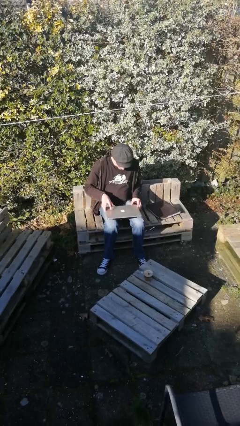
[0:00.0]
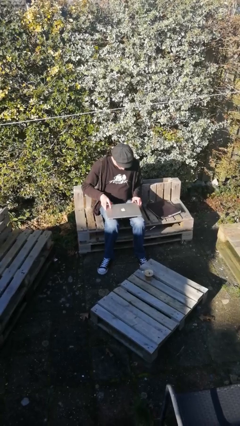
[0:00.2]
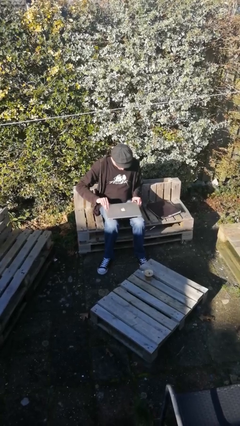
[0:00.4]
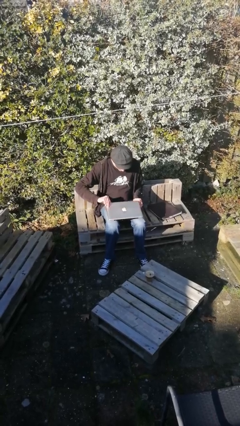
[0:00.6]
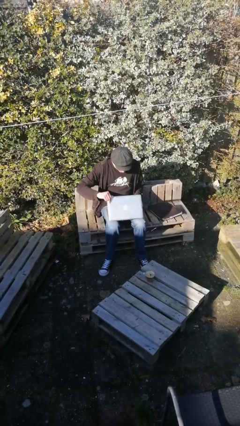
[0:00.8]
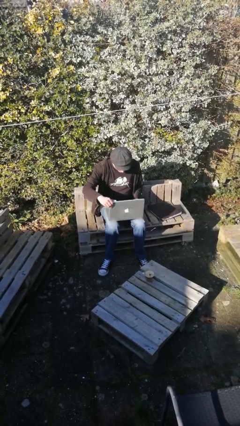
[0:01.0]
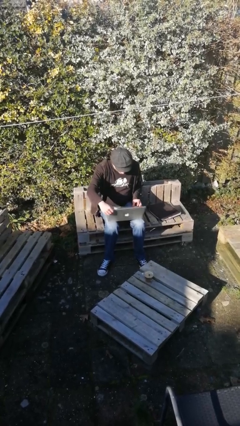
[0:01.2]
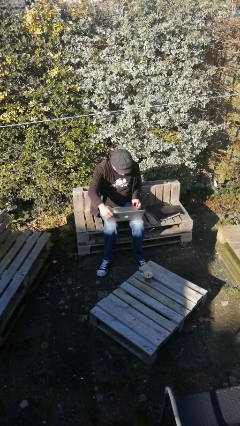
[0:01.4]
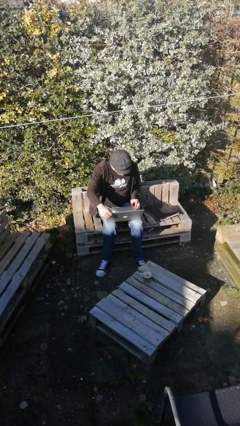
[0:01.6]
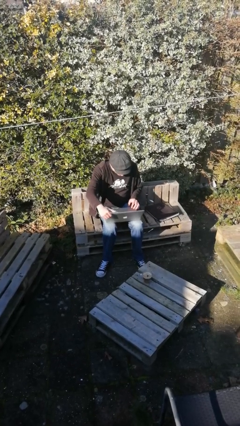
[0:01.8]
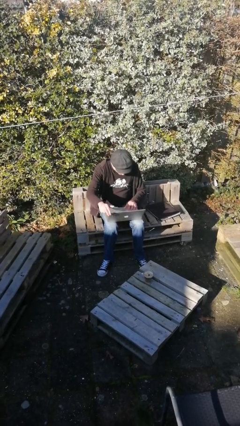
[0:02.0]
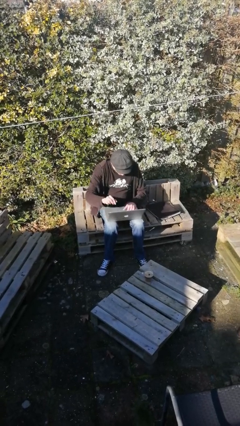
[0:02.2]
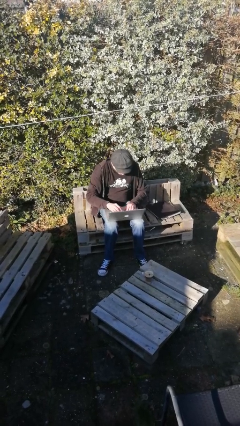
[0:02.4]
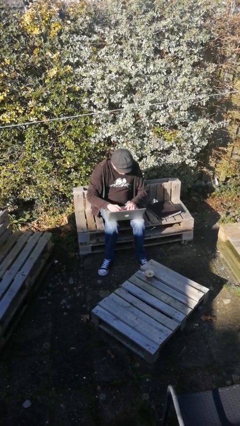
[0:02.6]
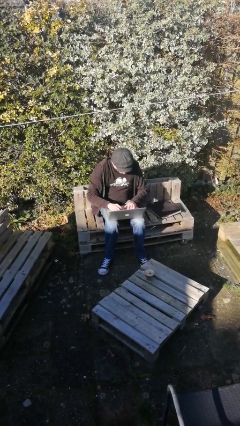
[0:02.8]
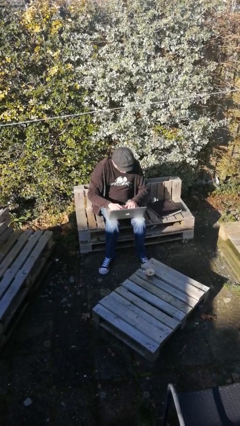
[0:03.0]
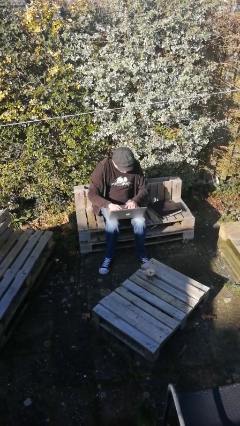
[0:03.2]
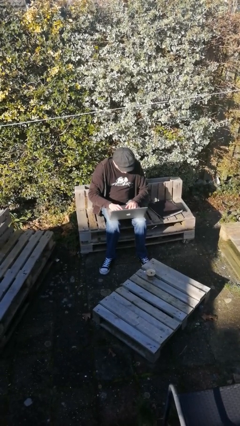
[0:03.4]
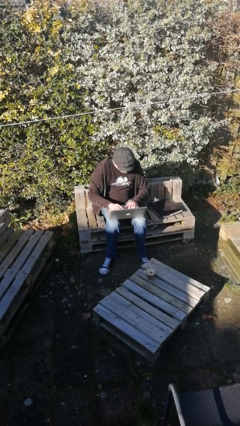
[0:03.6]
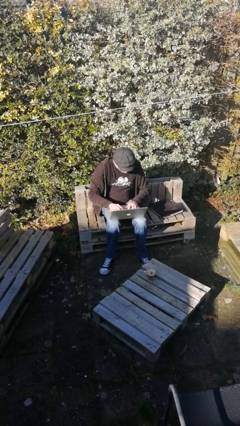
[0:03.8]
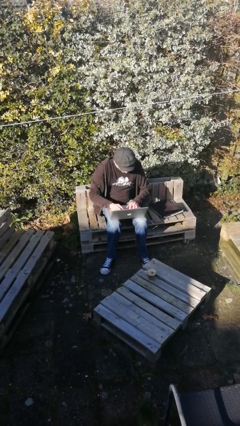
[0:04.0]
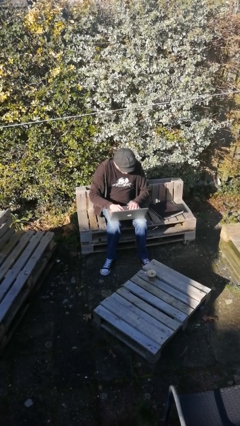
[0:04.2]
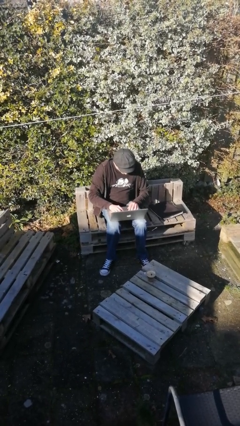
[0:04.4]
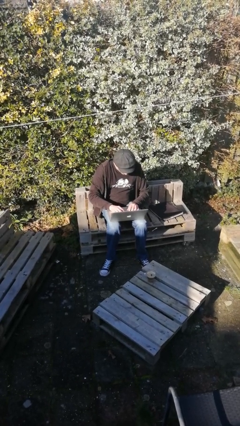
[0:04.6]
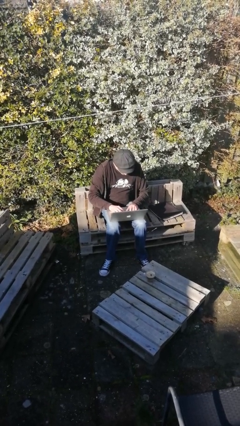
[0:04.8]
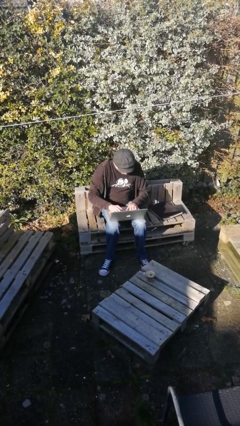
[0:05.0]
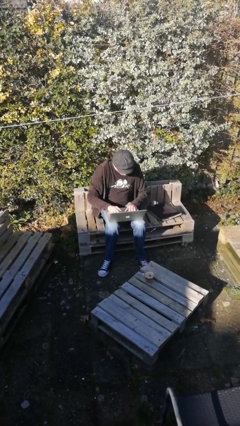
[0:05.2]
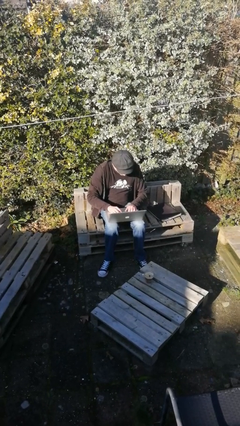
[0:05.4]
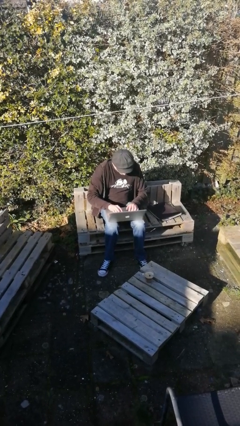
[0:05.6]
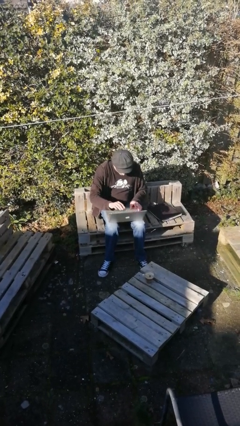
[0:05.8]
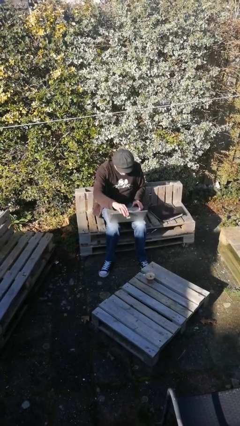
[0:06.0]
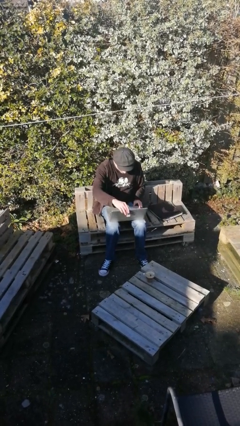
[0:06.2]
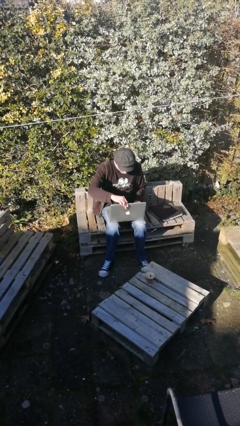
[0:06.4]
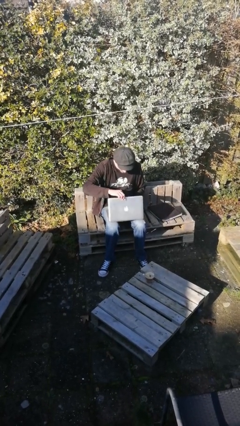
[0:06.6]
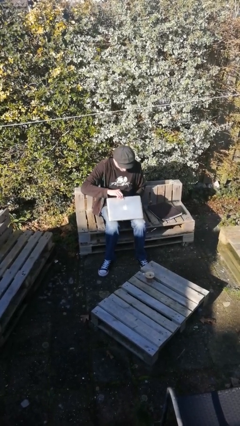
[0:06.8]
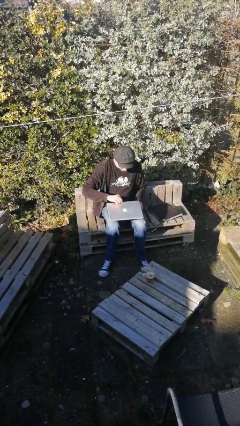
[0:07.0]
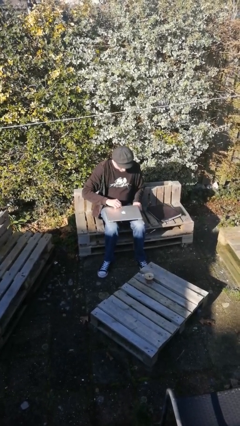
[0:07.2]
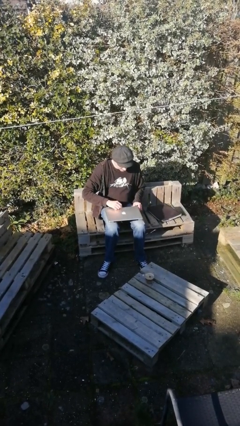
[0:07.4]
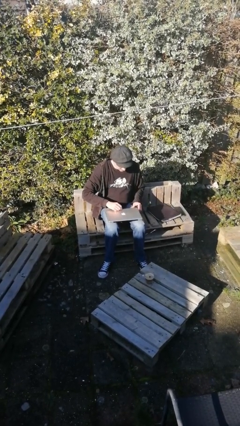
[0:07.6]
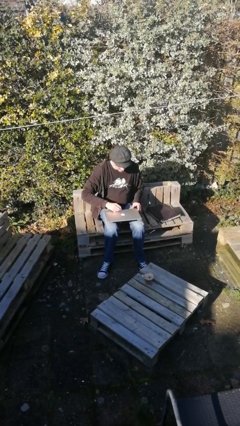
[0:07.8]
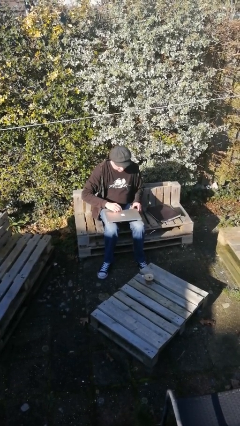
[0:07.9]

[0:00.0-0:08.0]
person interacts with laptop

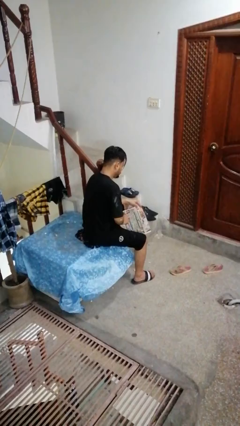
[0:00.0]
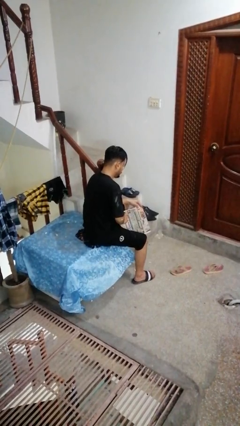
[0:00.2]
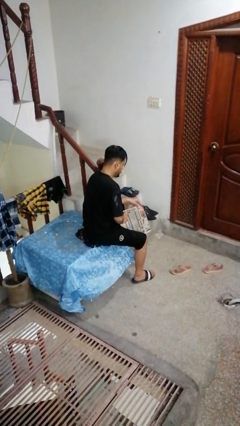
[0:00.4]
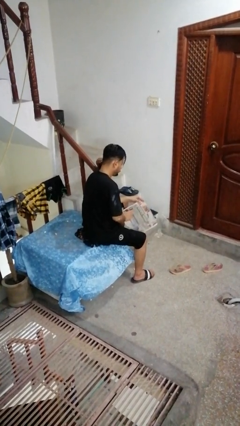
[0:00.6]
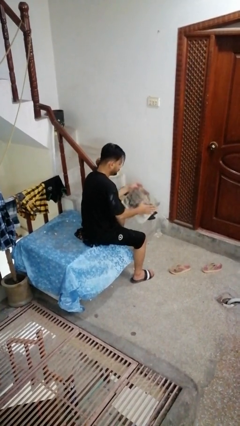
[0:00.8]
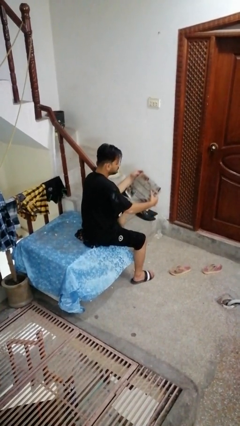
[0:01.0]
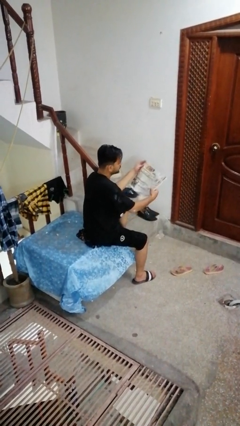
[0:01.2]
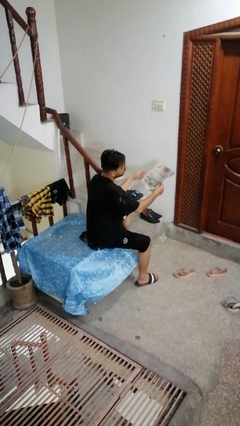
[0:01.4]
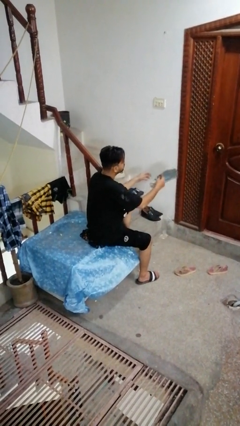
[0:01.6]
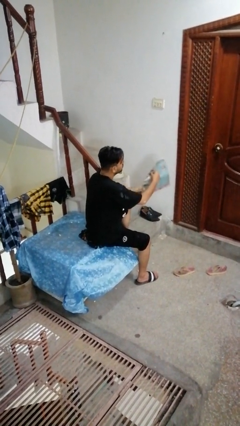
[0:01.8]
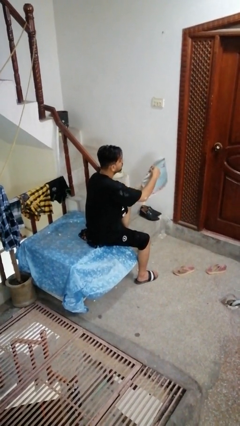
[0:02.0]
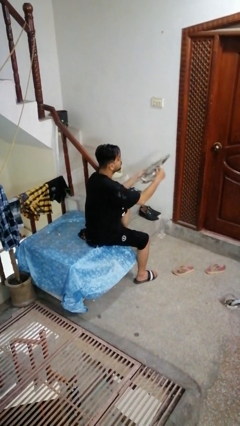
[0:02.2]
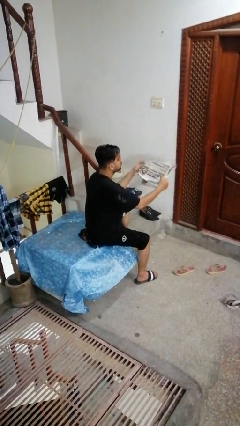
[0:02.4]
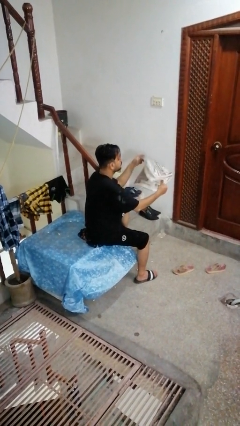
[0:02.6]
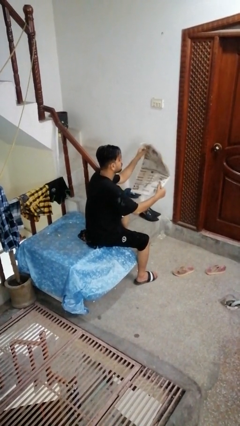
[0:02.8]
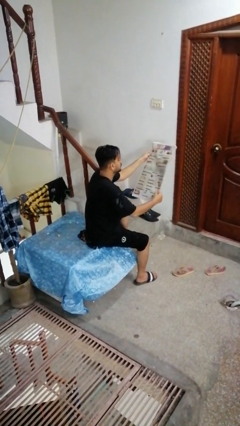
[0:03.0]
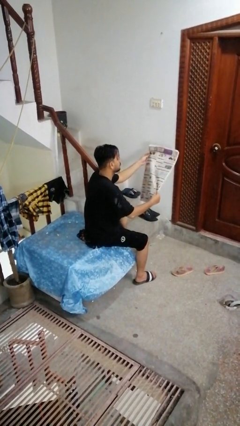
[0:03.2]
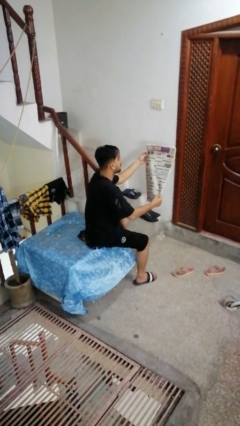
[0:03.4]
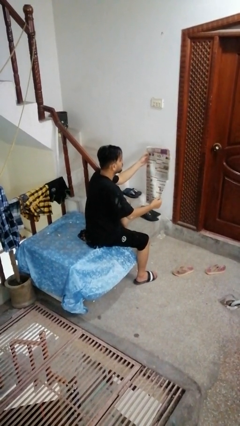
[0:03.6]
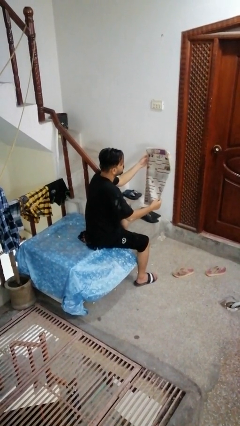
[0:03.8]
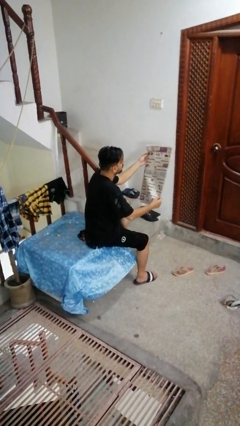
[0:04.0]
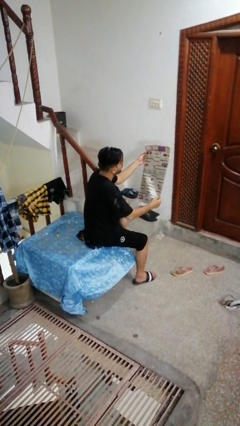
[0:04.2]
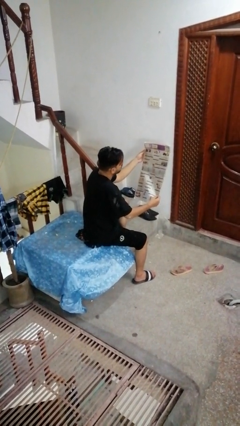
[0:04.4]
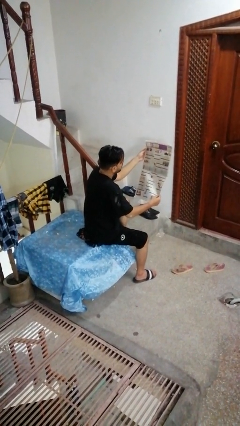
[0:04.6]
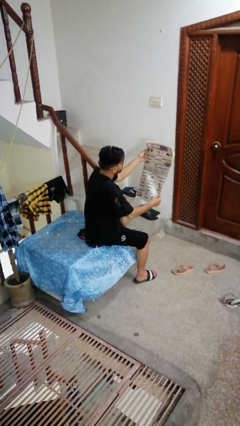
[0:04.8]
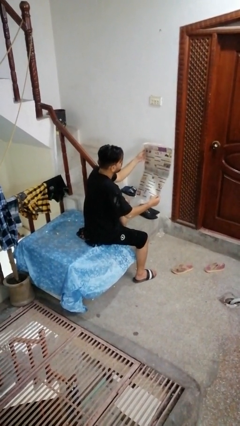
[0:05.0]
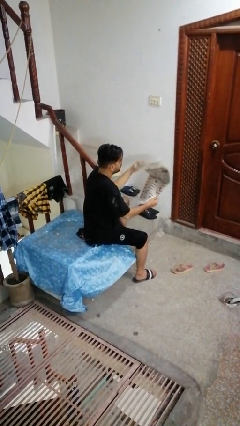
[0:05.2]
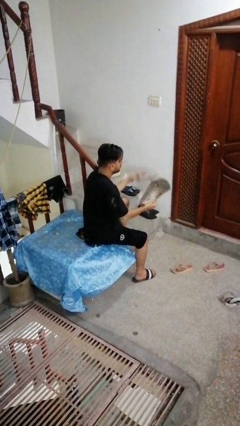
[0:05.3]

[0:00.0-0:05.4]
person reads newspaper

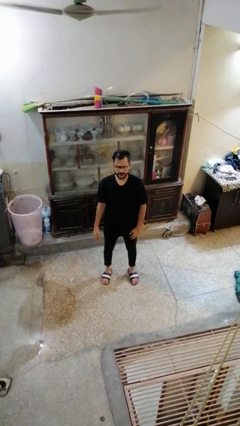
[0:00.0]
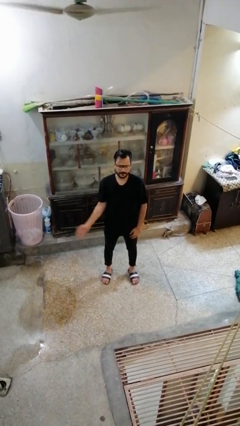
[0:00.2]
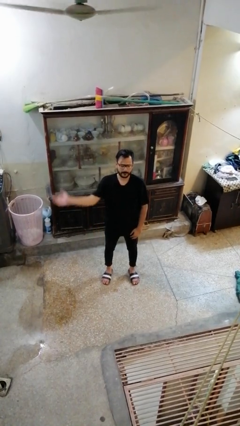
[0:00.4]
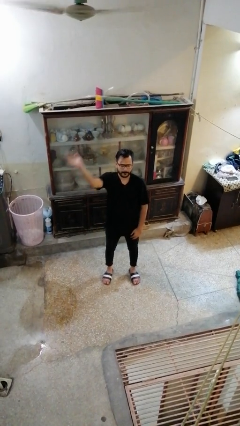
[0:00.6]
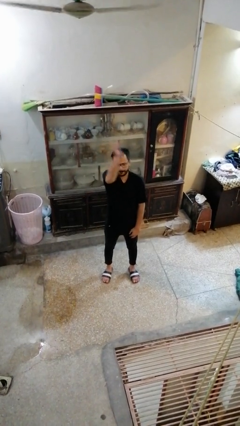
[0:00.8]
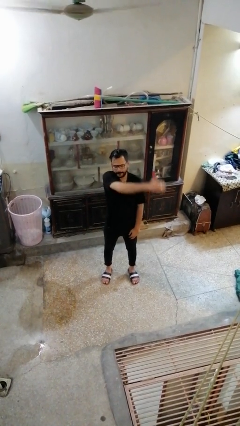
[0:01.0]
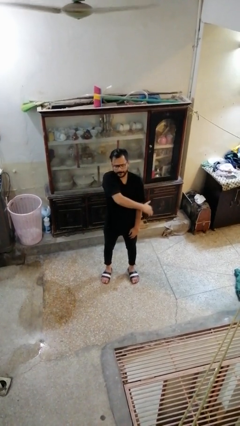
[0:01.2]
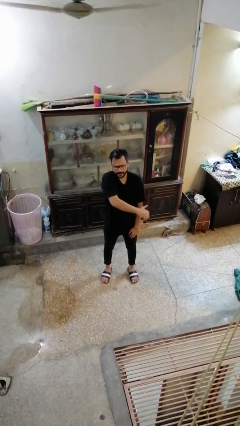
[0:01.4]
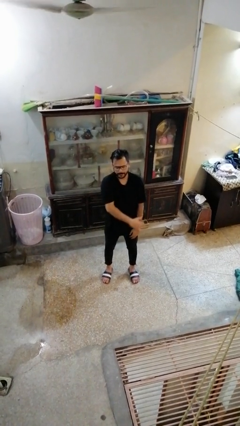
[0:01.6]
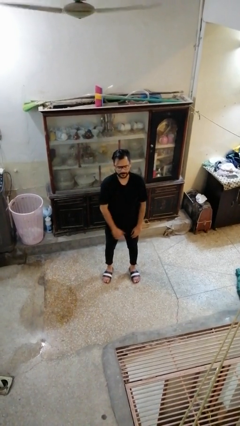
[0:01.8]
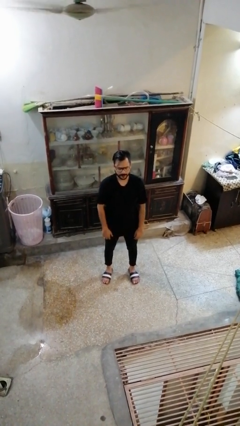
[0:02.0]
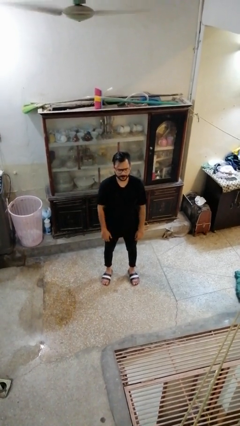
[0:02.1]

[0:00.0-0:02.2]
person gestures swipe left

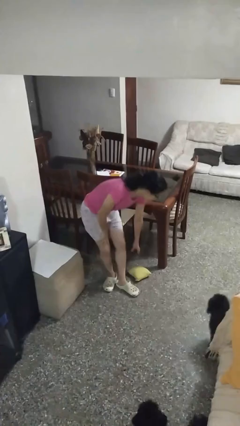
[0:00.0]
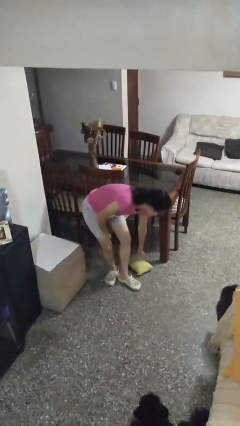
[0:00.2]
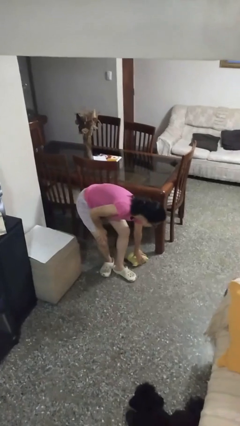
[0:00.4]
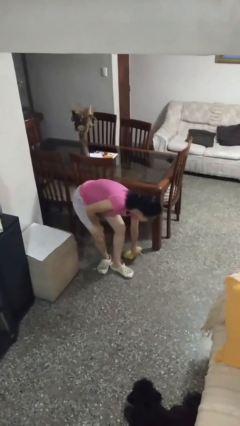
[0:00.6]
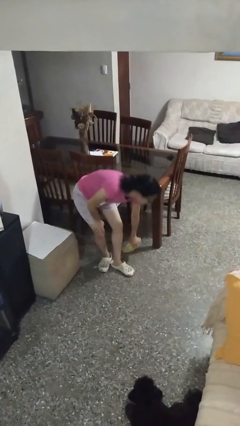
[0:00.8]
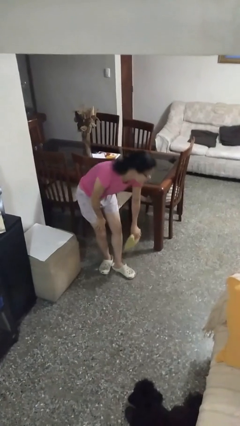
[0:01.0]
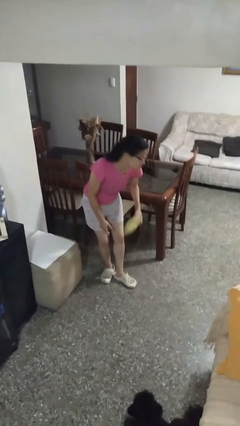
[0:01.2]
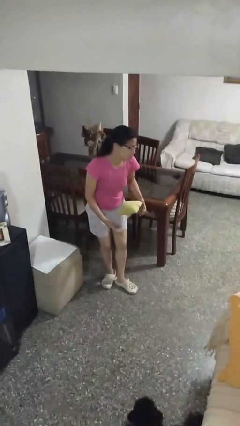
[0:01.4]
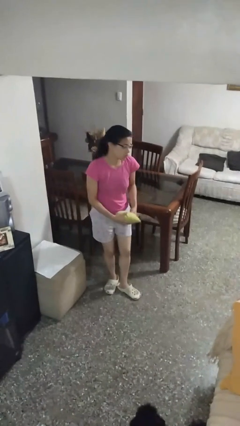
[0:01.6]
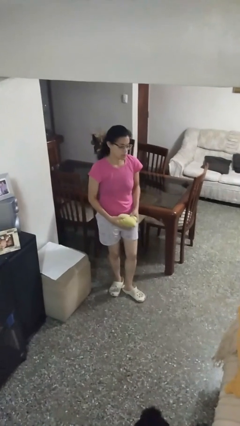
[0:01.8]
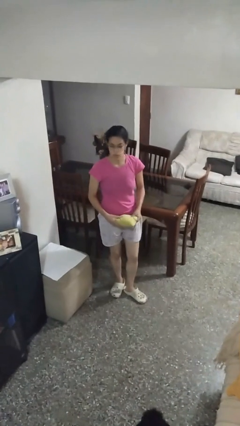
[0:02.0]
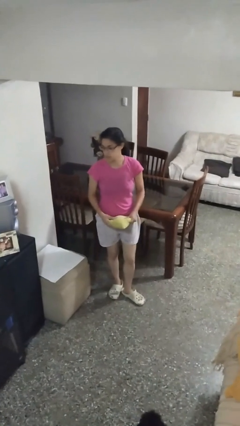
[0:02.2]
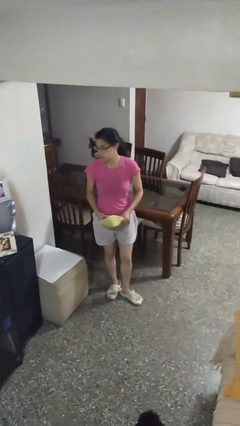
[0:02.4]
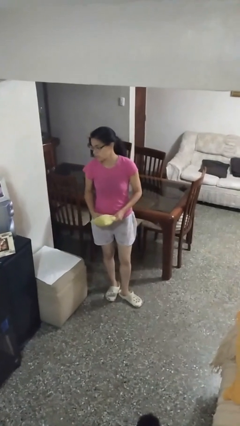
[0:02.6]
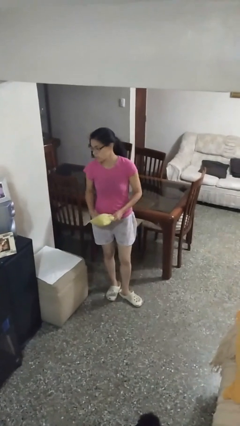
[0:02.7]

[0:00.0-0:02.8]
person picks up object from floor
